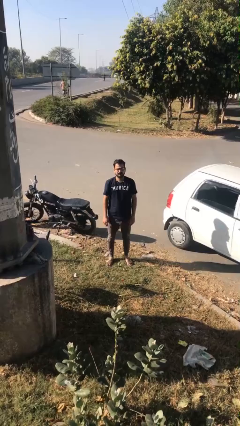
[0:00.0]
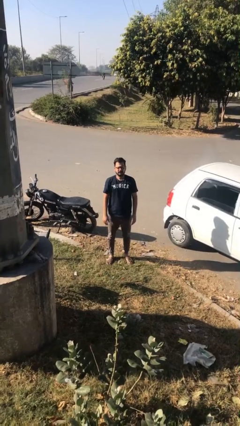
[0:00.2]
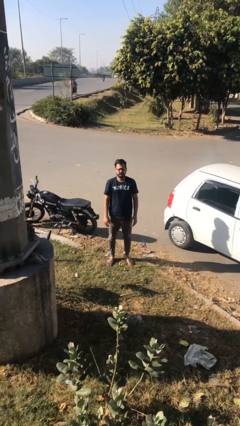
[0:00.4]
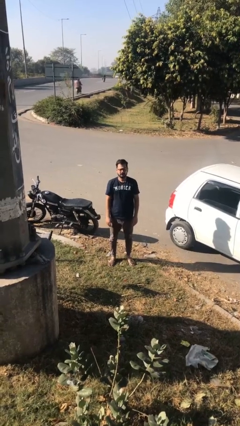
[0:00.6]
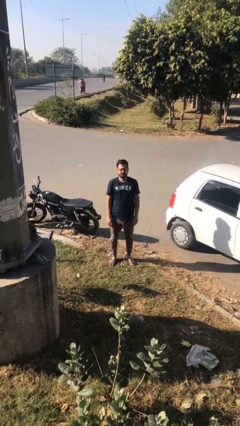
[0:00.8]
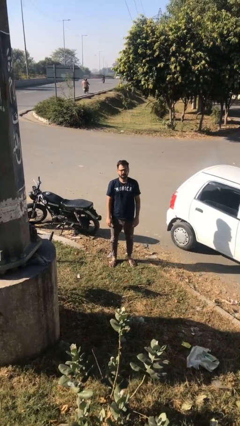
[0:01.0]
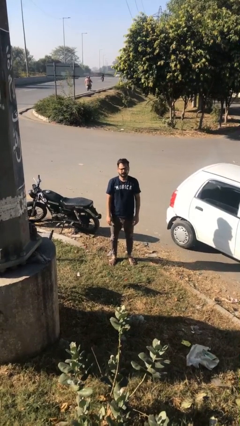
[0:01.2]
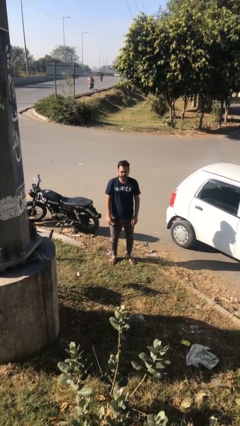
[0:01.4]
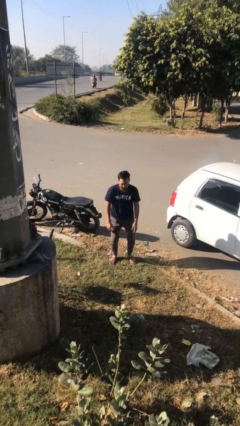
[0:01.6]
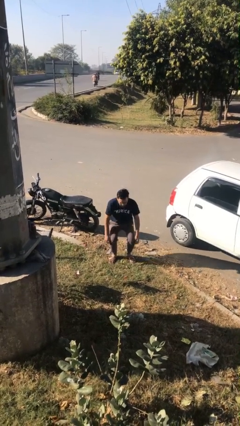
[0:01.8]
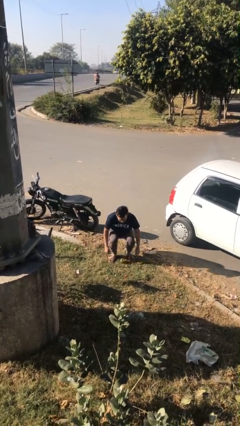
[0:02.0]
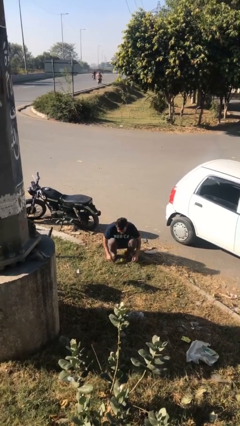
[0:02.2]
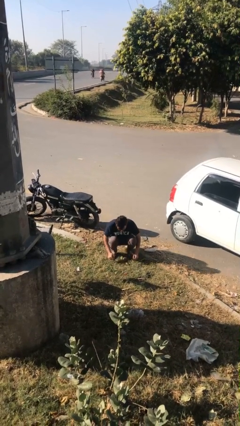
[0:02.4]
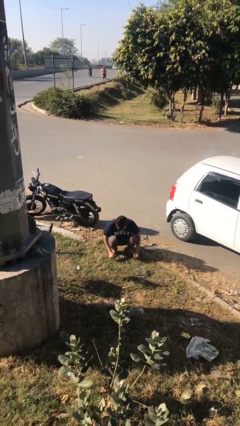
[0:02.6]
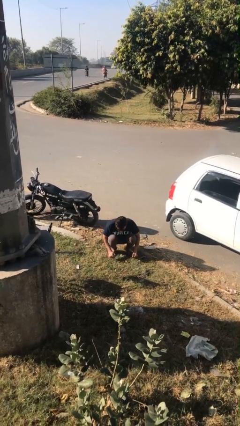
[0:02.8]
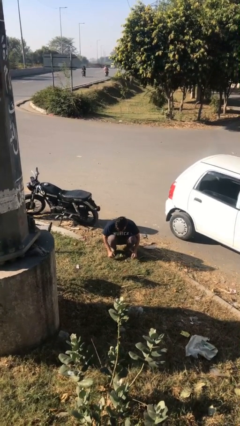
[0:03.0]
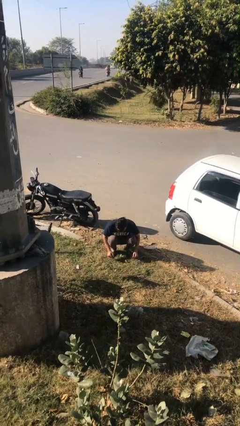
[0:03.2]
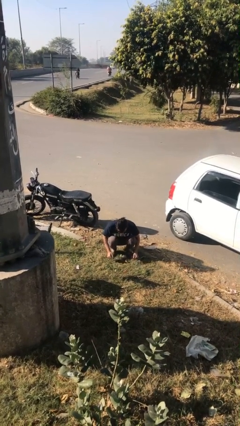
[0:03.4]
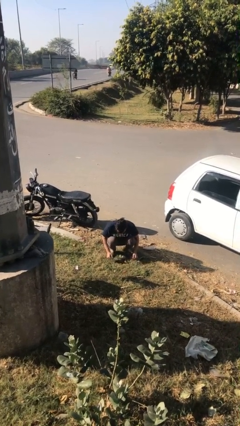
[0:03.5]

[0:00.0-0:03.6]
person sits down

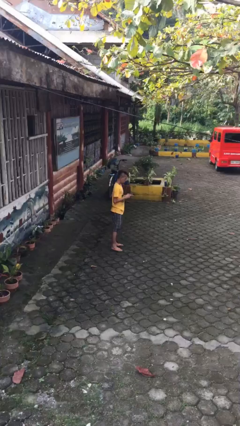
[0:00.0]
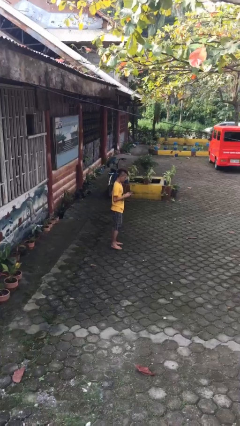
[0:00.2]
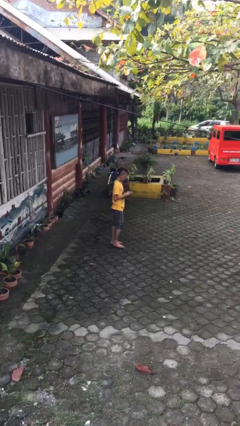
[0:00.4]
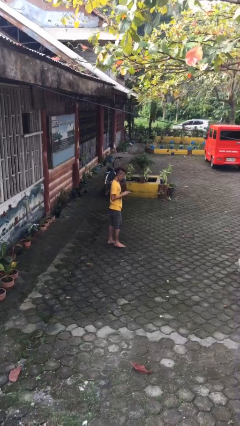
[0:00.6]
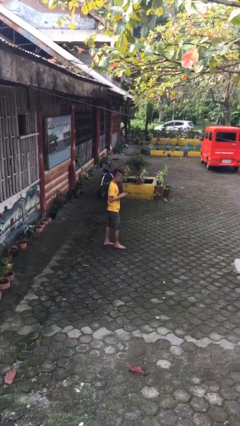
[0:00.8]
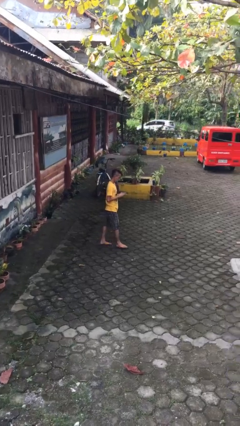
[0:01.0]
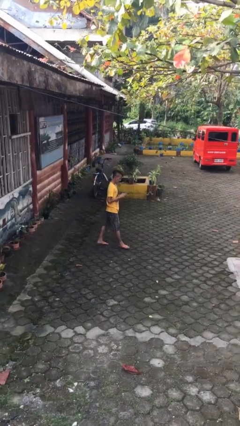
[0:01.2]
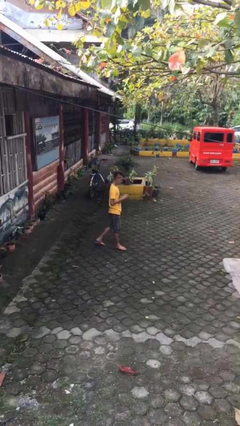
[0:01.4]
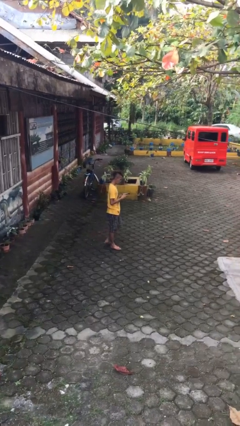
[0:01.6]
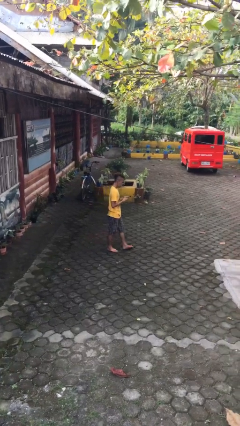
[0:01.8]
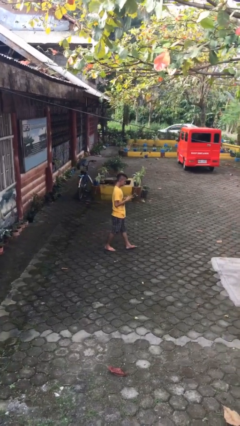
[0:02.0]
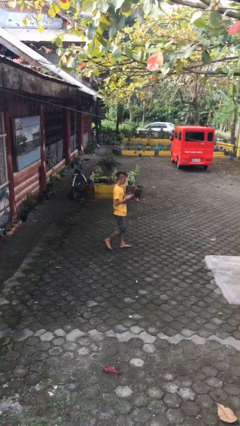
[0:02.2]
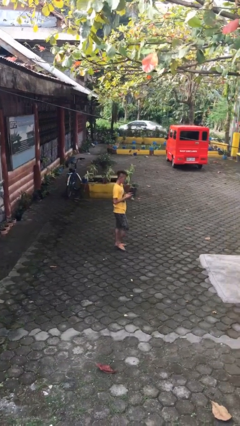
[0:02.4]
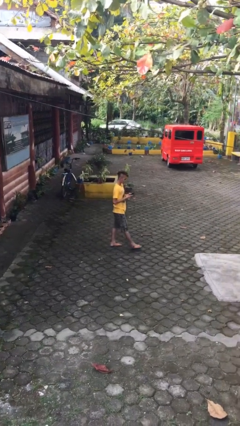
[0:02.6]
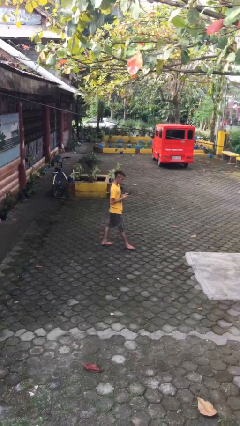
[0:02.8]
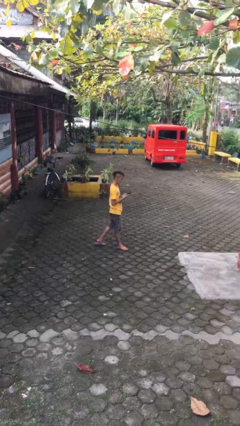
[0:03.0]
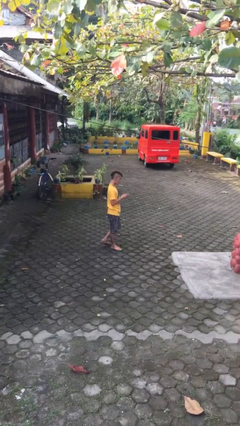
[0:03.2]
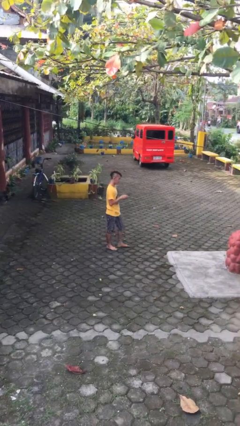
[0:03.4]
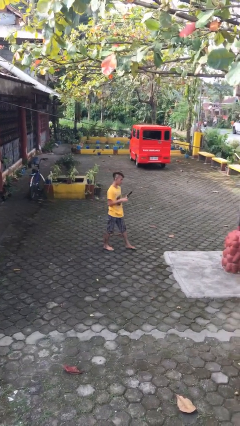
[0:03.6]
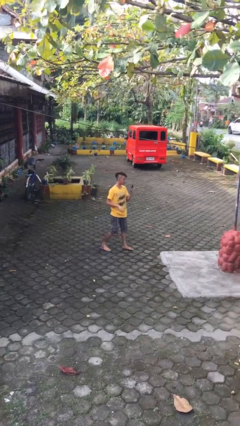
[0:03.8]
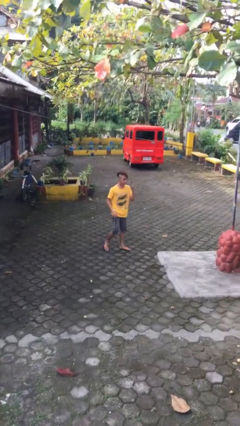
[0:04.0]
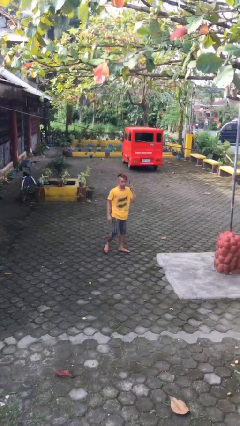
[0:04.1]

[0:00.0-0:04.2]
person texts on phone

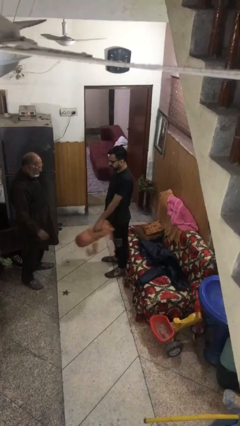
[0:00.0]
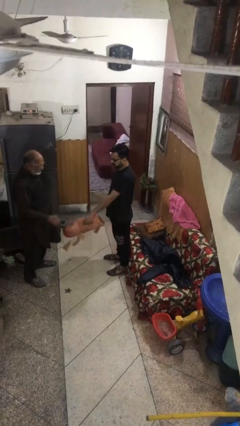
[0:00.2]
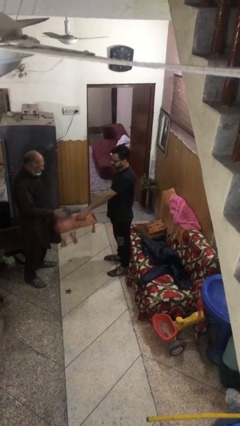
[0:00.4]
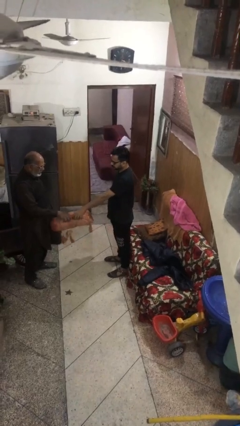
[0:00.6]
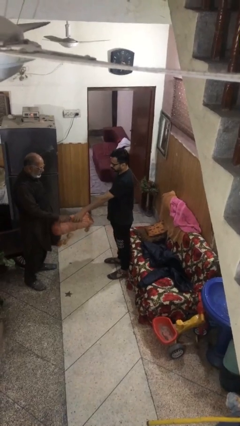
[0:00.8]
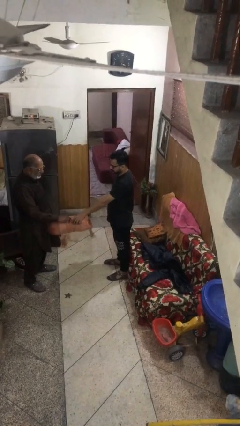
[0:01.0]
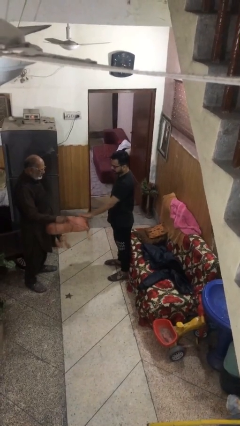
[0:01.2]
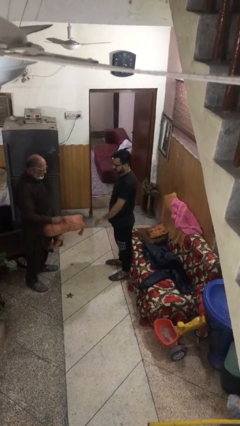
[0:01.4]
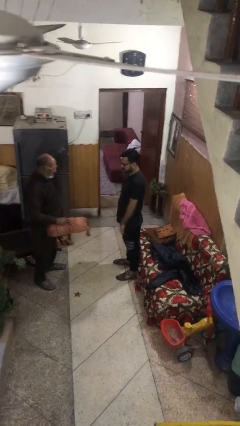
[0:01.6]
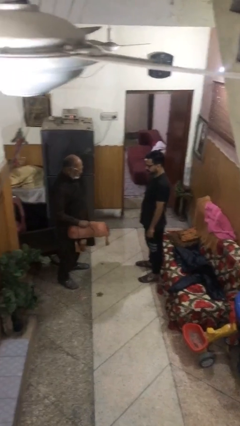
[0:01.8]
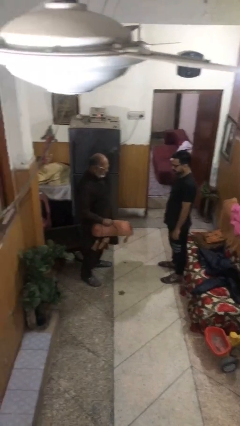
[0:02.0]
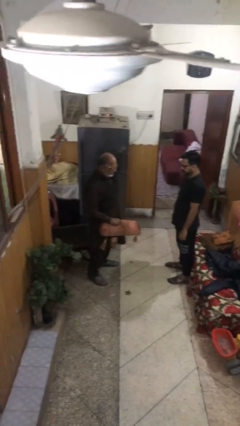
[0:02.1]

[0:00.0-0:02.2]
person transfers object to person

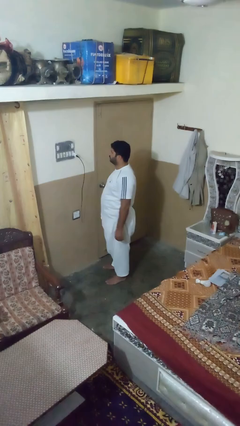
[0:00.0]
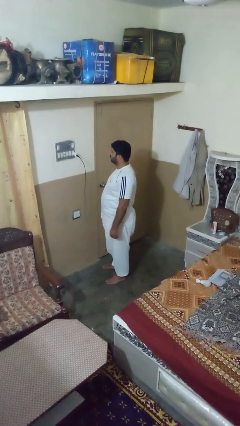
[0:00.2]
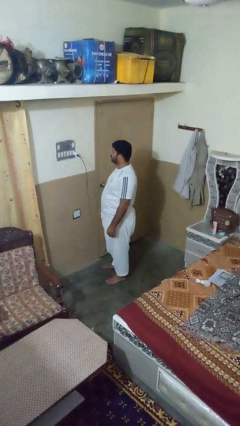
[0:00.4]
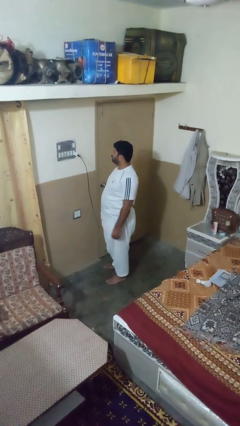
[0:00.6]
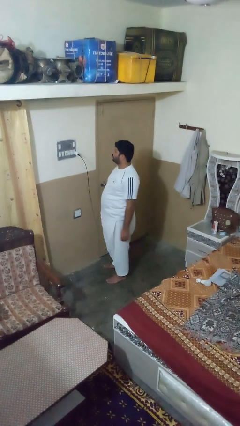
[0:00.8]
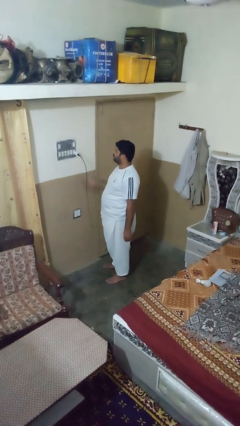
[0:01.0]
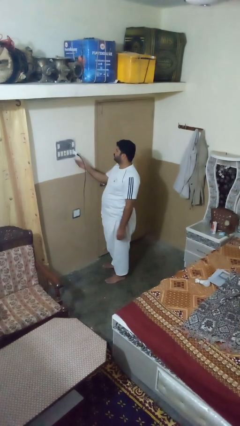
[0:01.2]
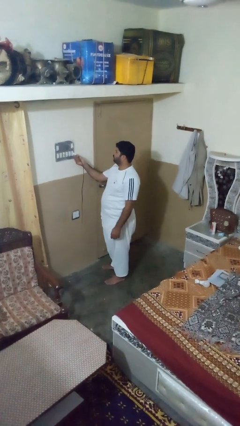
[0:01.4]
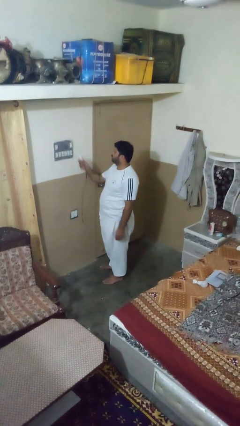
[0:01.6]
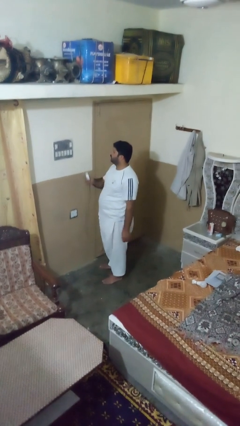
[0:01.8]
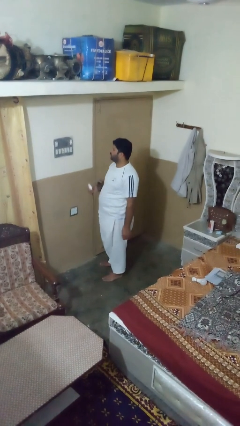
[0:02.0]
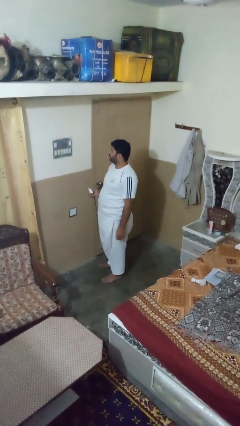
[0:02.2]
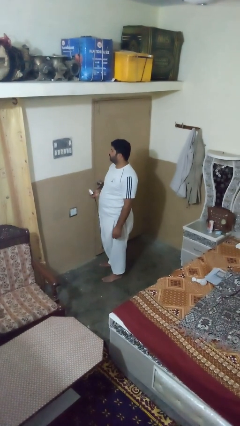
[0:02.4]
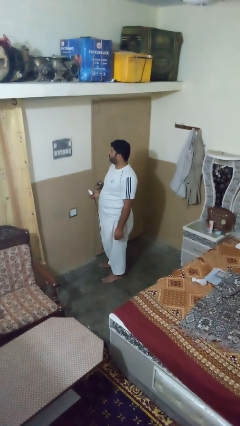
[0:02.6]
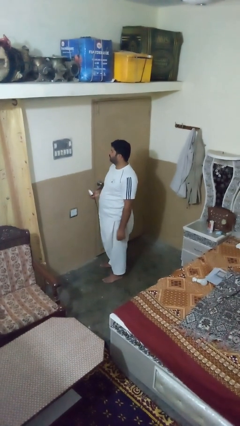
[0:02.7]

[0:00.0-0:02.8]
person unplugs from electrical socket

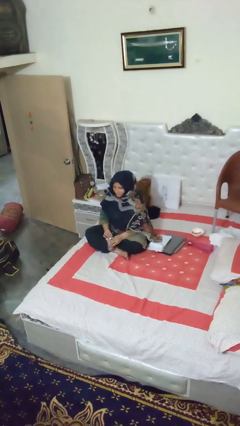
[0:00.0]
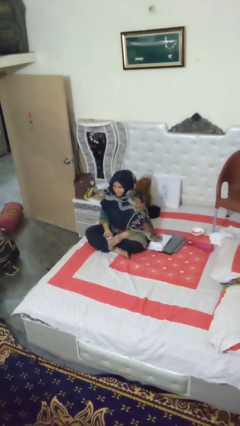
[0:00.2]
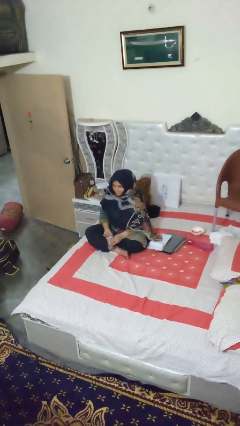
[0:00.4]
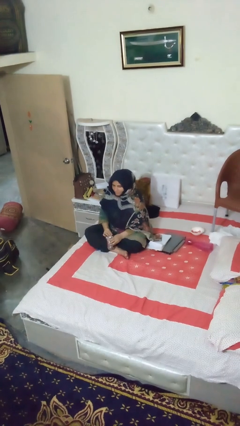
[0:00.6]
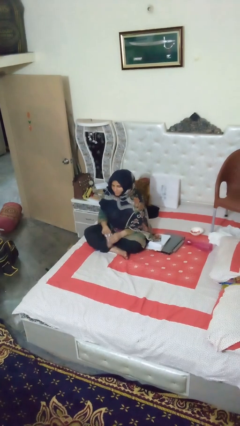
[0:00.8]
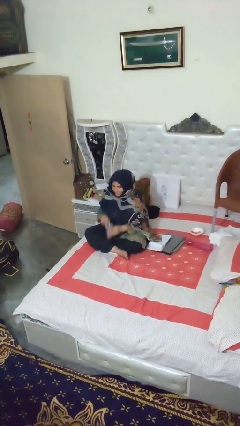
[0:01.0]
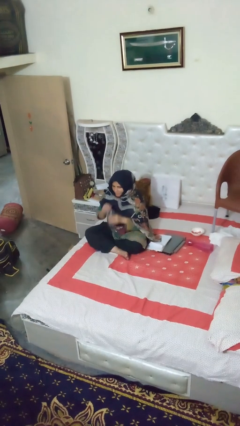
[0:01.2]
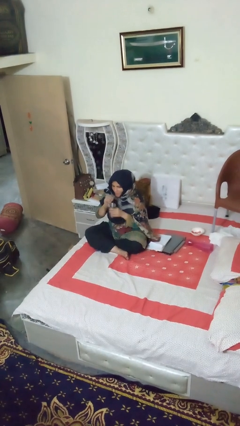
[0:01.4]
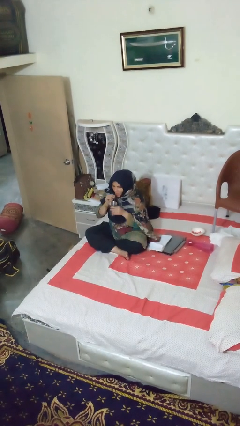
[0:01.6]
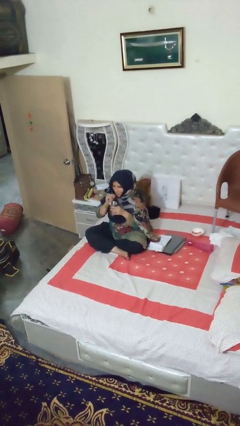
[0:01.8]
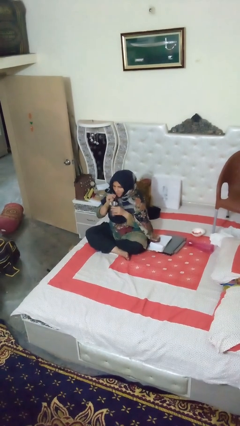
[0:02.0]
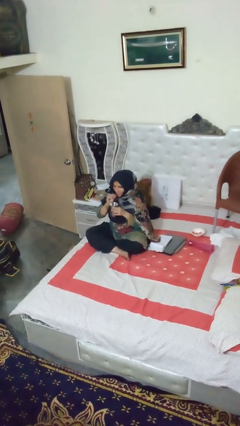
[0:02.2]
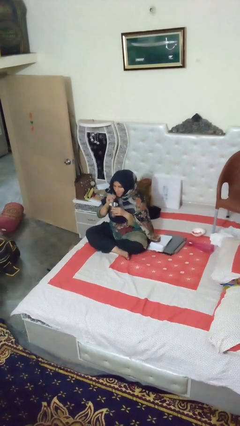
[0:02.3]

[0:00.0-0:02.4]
person drinks from straw

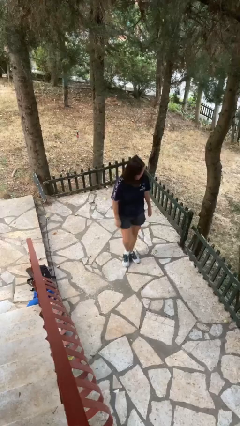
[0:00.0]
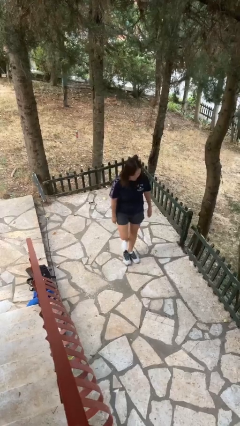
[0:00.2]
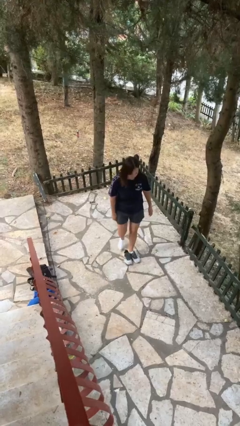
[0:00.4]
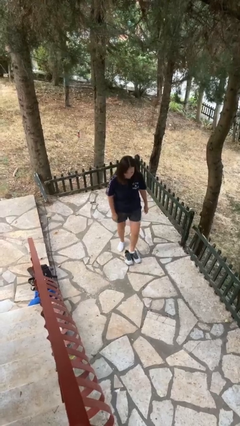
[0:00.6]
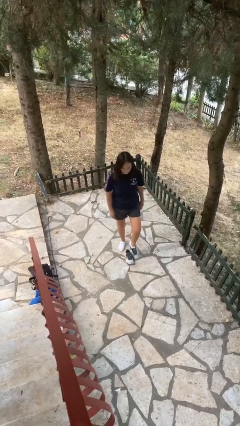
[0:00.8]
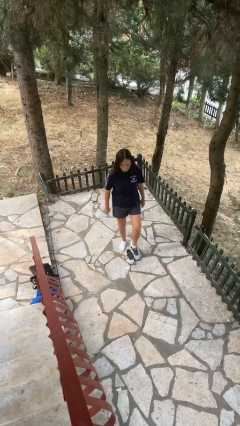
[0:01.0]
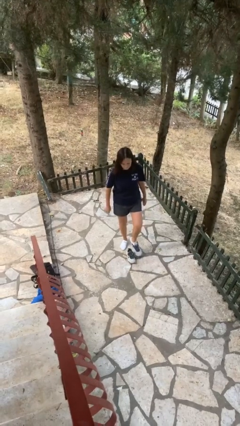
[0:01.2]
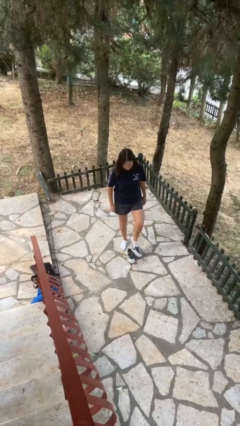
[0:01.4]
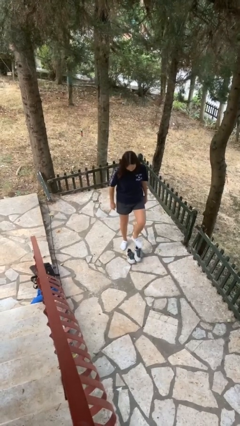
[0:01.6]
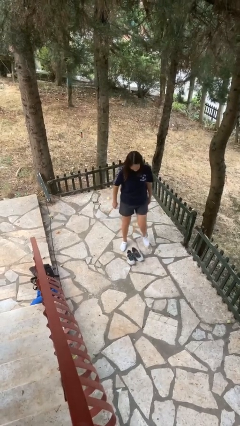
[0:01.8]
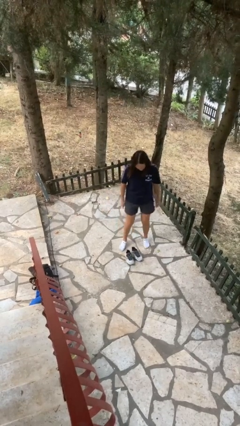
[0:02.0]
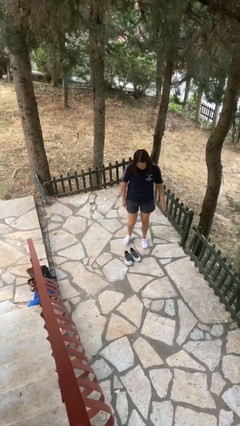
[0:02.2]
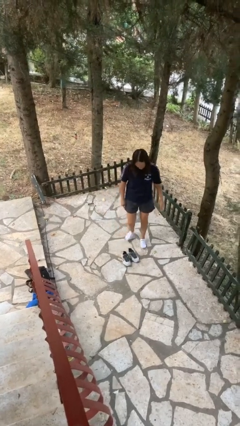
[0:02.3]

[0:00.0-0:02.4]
person takes off shoes
